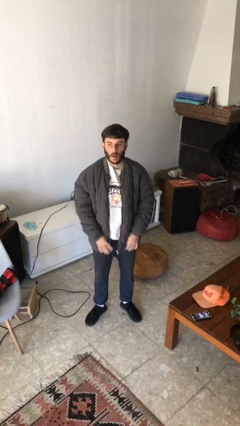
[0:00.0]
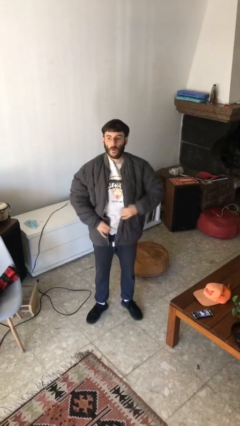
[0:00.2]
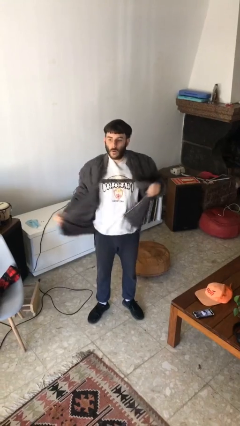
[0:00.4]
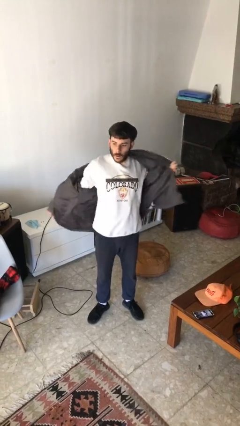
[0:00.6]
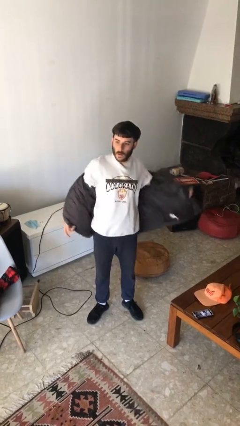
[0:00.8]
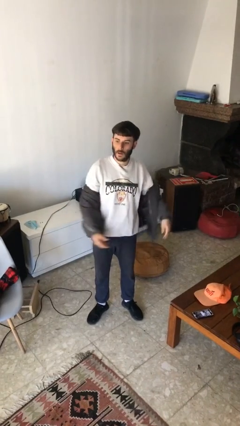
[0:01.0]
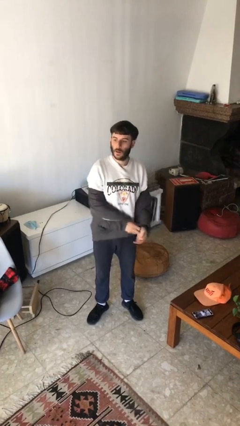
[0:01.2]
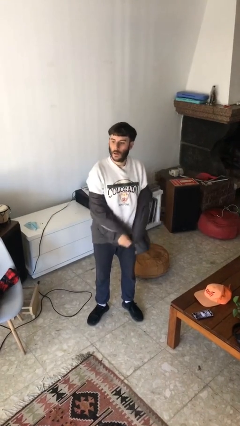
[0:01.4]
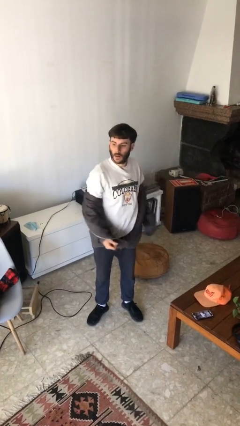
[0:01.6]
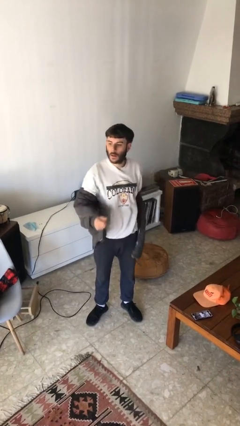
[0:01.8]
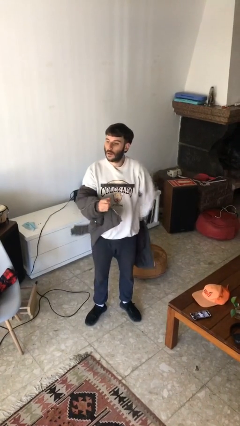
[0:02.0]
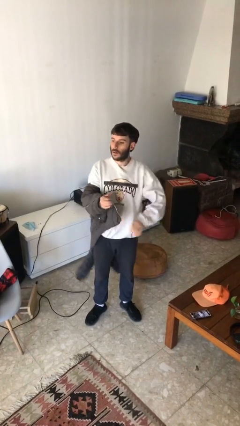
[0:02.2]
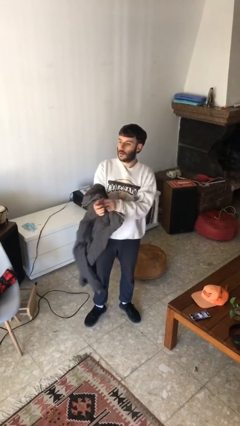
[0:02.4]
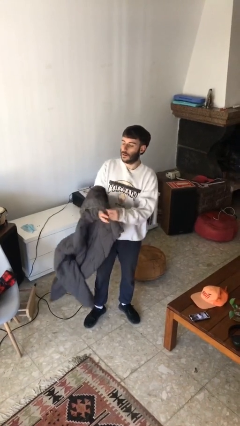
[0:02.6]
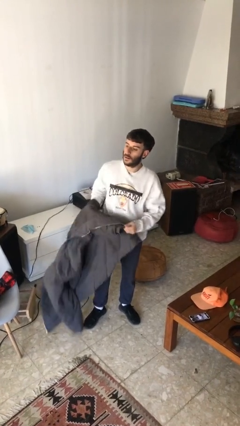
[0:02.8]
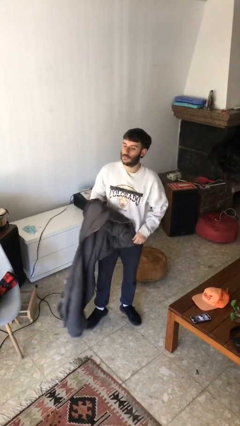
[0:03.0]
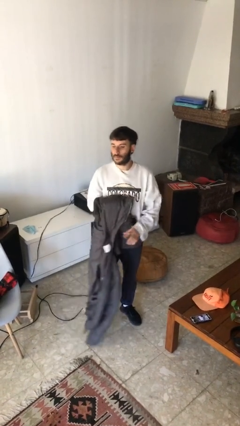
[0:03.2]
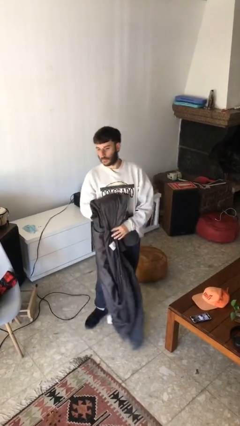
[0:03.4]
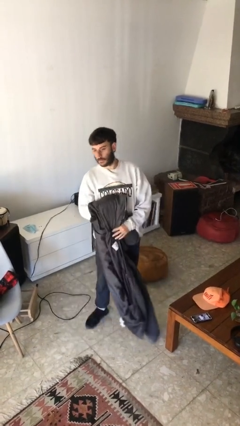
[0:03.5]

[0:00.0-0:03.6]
person takes off jacket

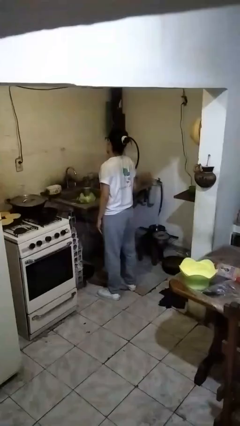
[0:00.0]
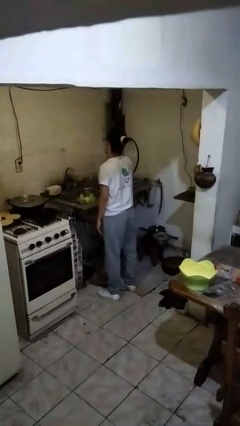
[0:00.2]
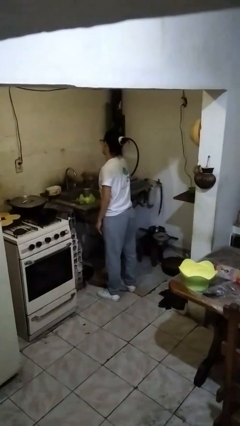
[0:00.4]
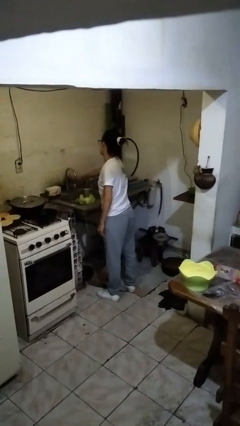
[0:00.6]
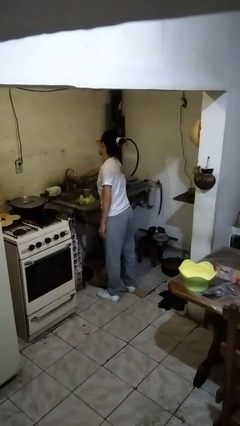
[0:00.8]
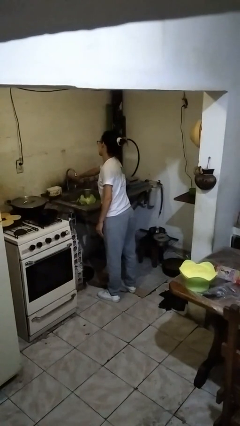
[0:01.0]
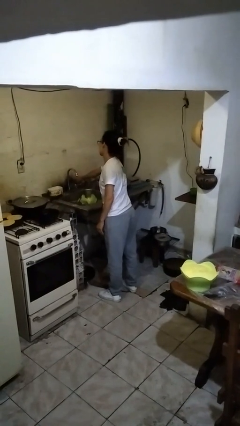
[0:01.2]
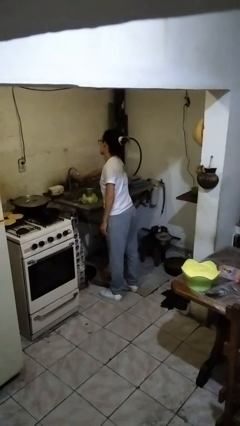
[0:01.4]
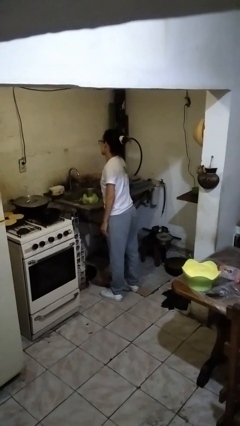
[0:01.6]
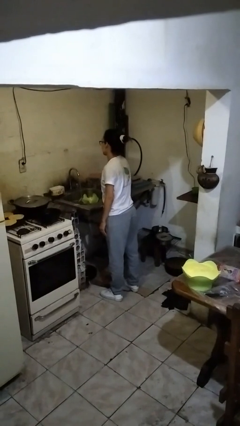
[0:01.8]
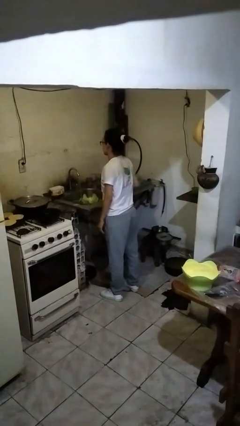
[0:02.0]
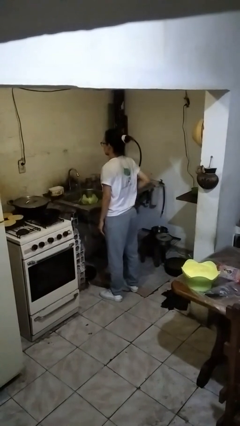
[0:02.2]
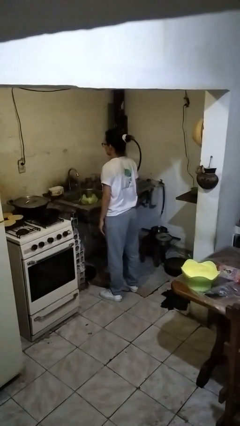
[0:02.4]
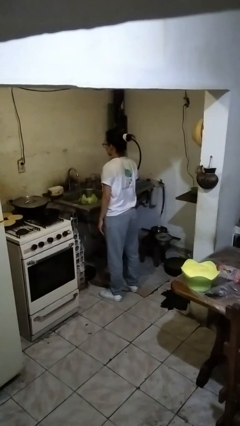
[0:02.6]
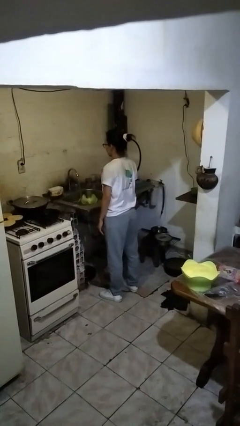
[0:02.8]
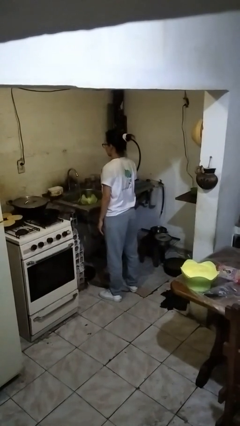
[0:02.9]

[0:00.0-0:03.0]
person turns on faucet

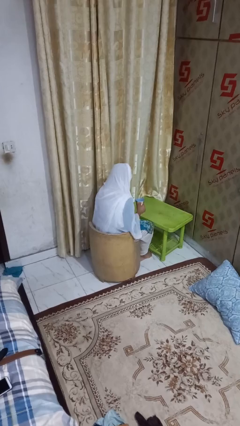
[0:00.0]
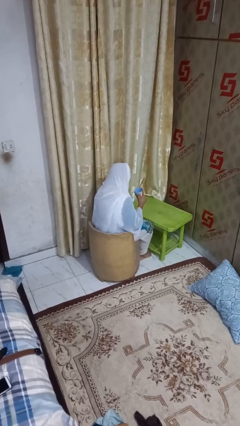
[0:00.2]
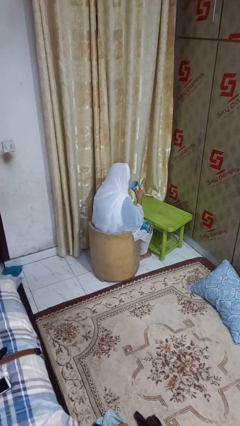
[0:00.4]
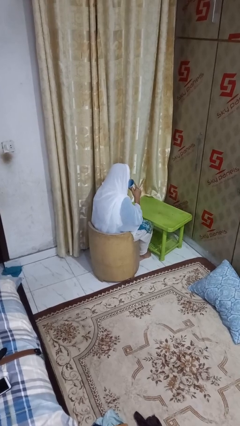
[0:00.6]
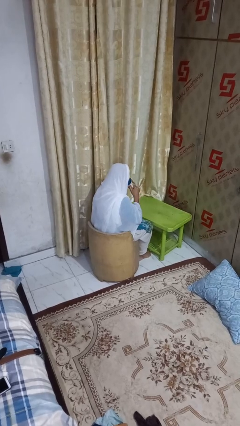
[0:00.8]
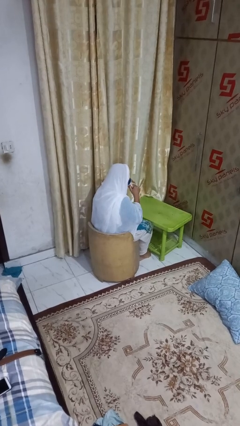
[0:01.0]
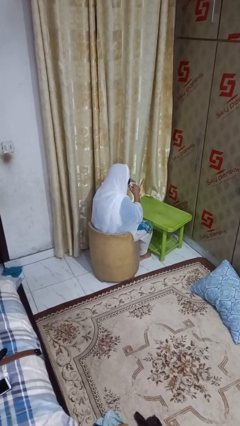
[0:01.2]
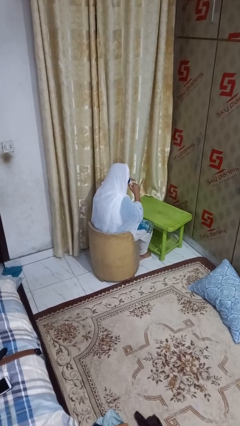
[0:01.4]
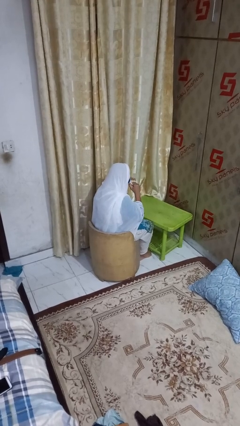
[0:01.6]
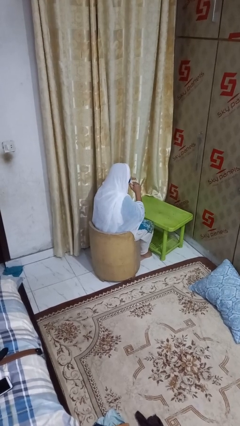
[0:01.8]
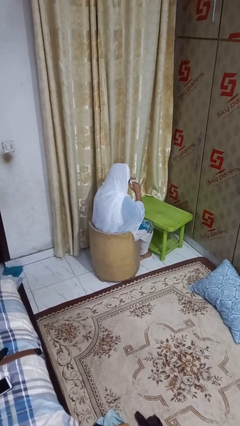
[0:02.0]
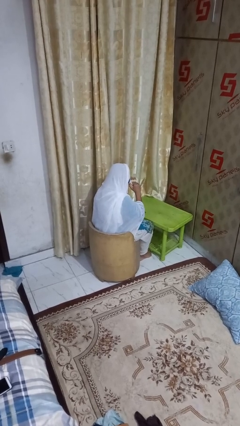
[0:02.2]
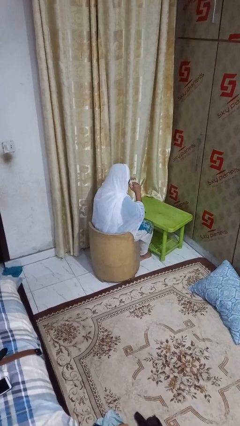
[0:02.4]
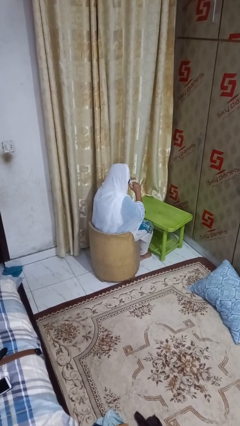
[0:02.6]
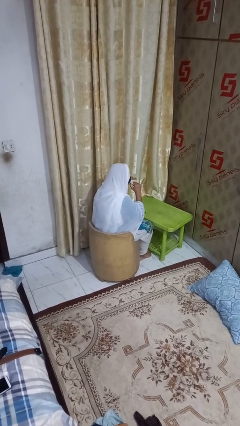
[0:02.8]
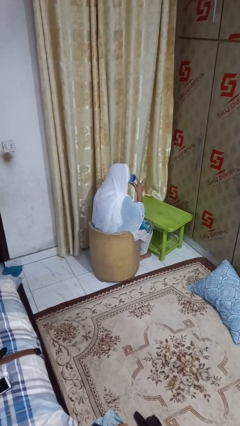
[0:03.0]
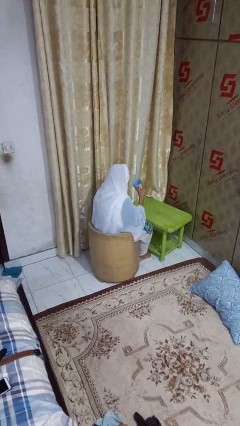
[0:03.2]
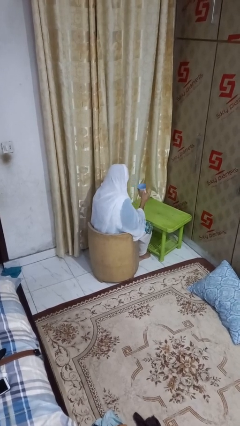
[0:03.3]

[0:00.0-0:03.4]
person drinks from mug

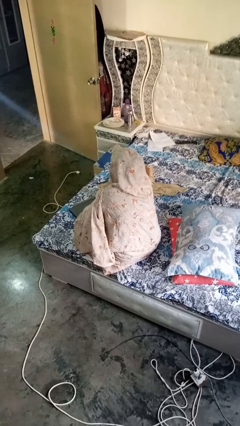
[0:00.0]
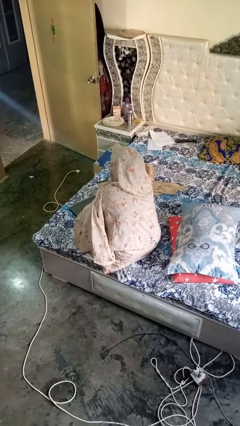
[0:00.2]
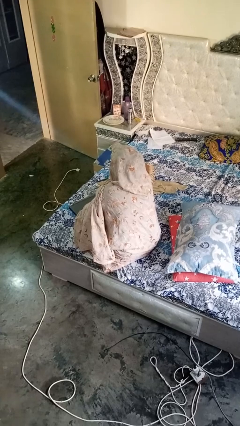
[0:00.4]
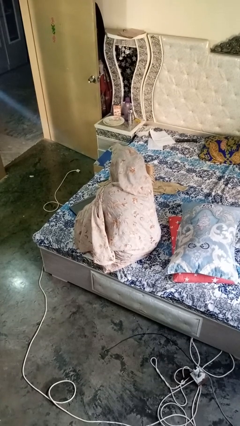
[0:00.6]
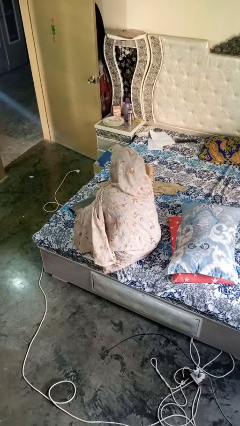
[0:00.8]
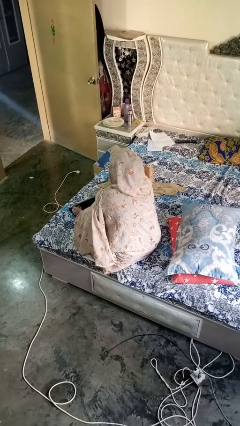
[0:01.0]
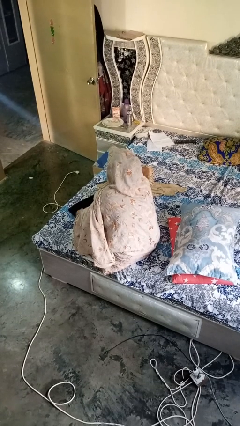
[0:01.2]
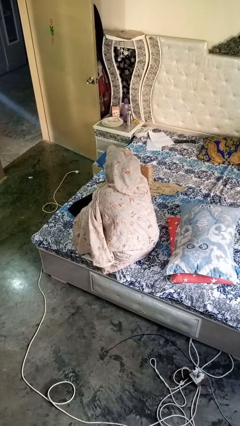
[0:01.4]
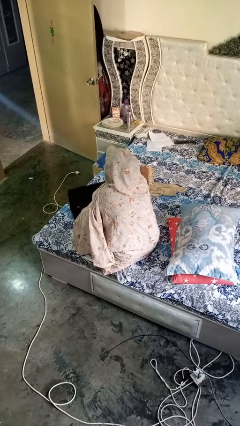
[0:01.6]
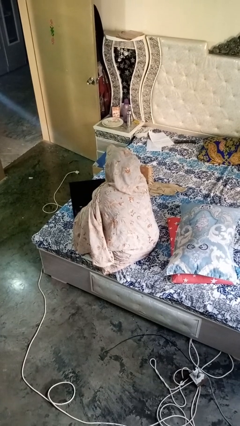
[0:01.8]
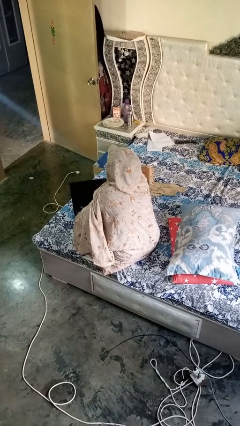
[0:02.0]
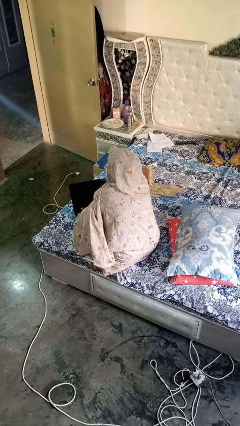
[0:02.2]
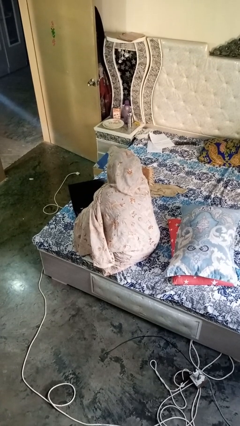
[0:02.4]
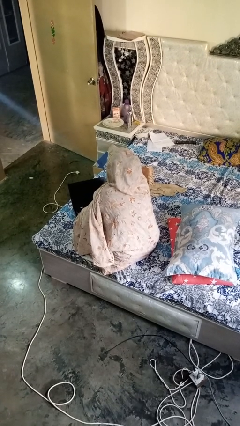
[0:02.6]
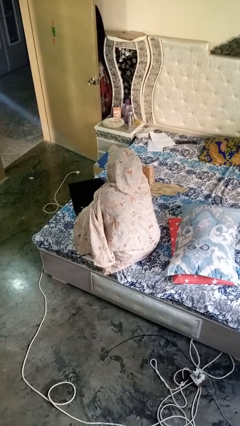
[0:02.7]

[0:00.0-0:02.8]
person opens laptop

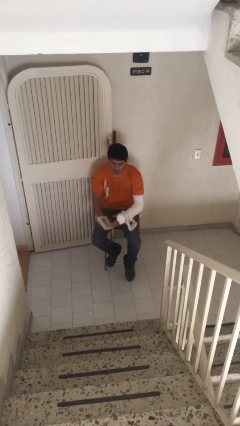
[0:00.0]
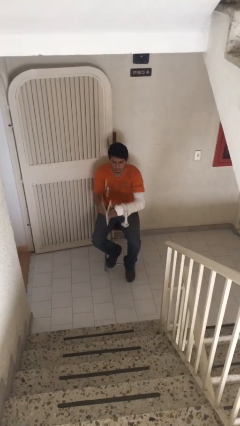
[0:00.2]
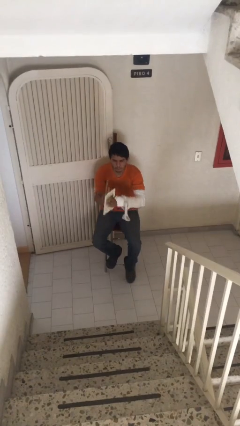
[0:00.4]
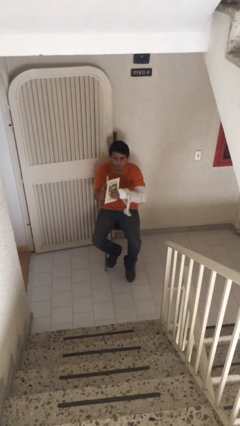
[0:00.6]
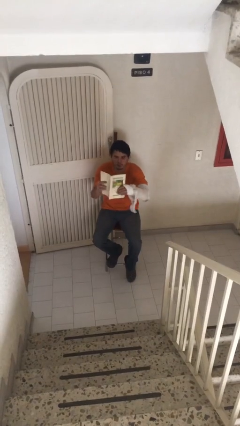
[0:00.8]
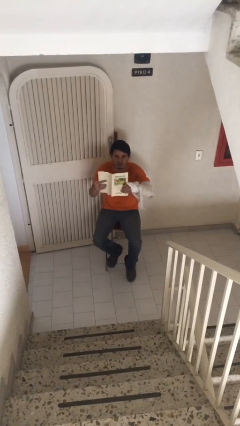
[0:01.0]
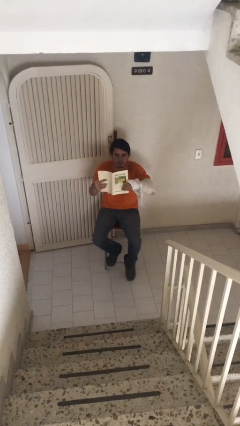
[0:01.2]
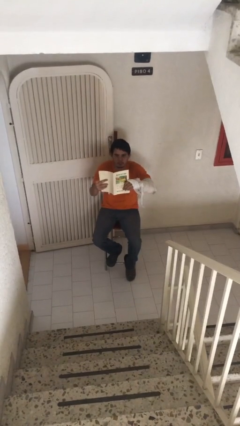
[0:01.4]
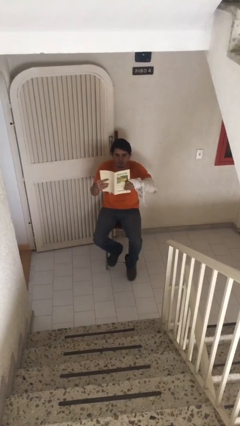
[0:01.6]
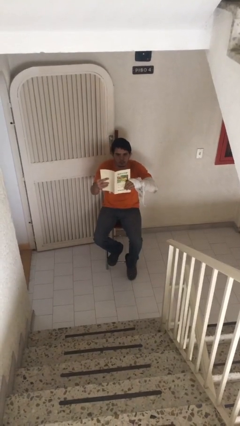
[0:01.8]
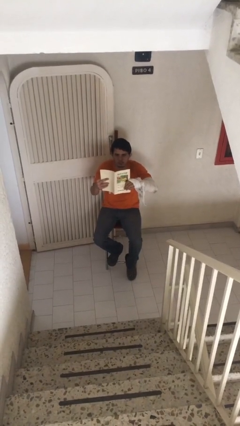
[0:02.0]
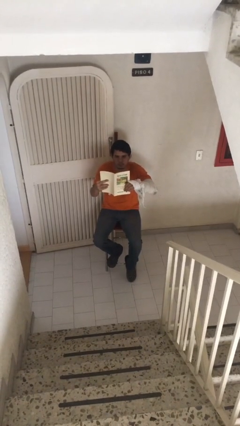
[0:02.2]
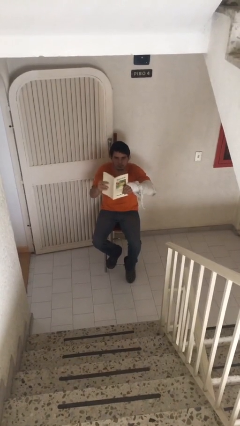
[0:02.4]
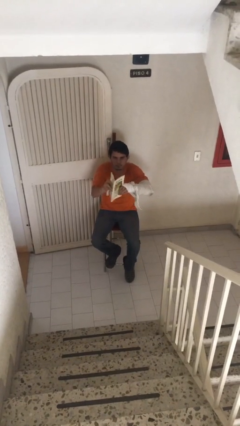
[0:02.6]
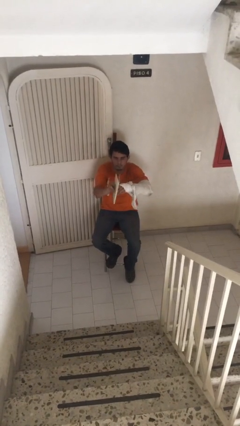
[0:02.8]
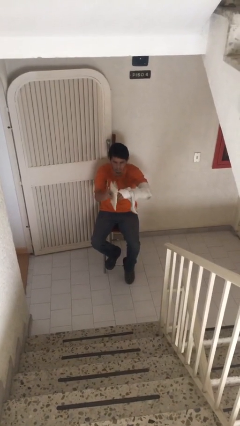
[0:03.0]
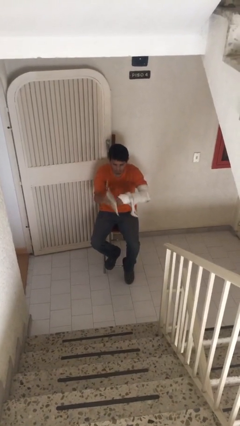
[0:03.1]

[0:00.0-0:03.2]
person reads document

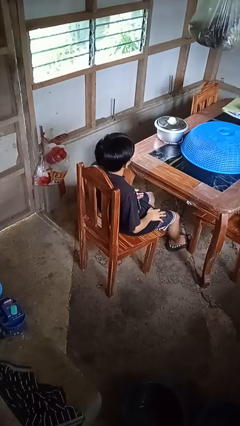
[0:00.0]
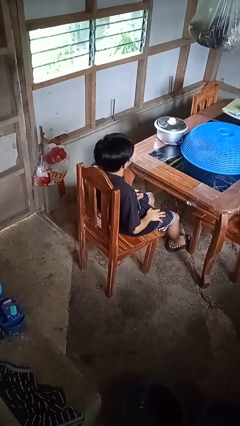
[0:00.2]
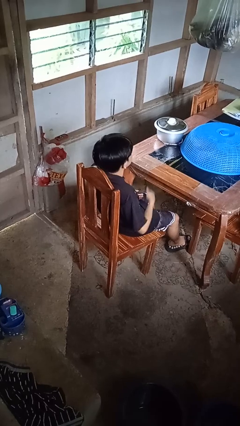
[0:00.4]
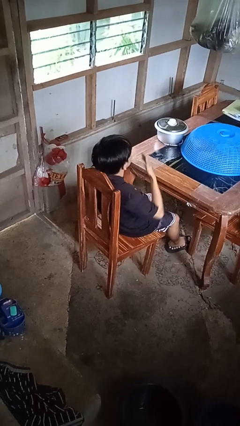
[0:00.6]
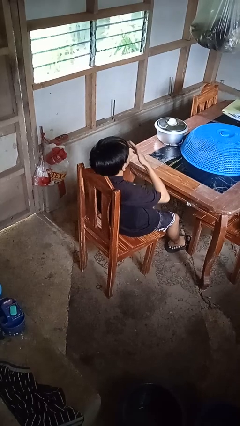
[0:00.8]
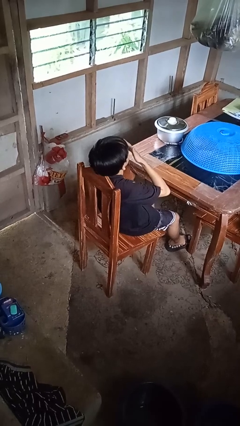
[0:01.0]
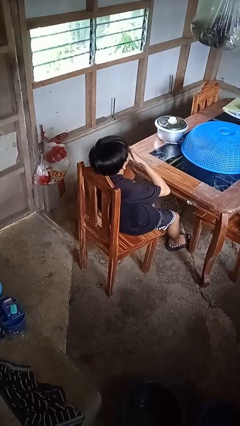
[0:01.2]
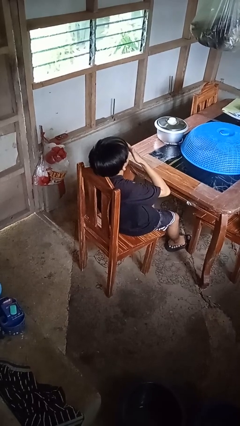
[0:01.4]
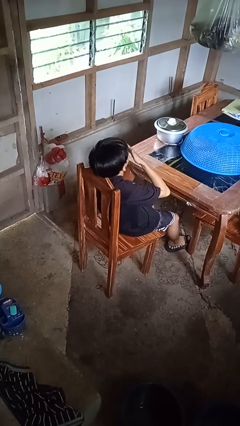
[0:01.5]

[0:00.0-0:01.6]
person yawns
